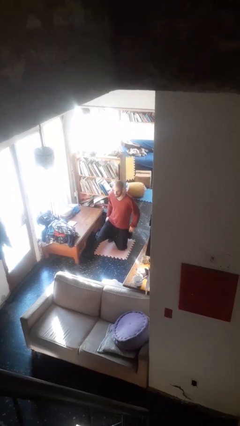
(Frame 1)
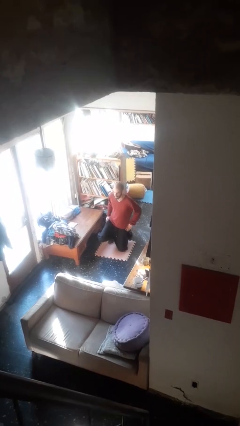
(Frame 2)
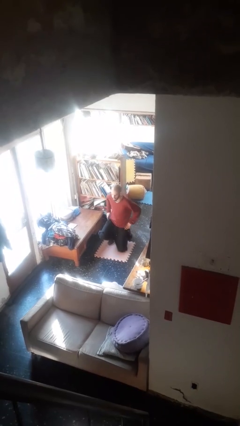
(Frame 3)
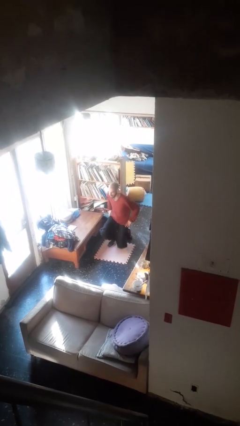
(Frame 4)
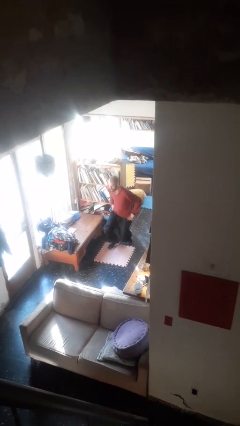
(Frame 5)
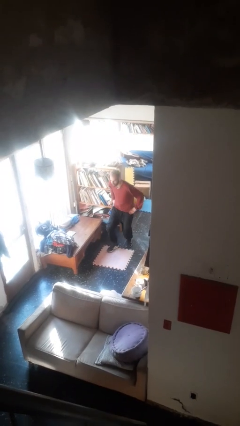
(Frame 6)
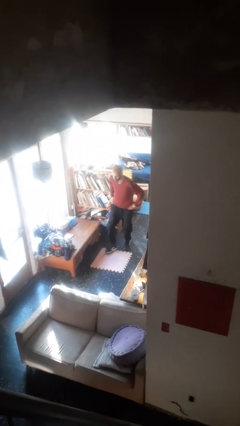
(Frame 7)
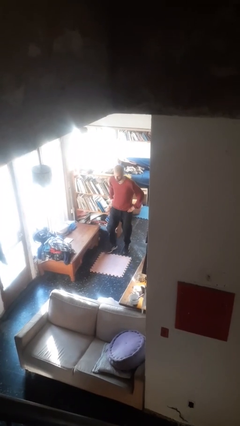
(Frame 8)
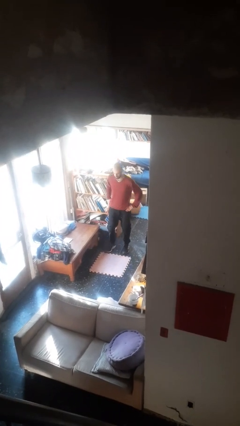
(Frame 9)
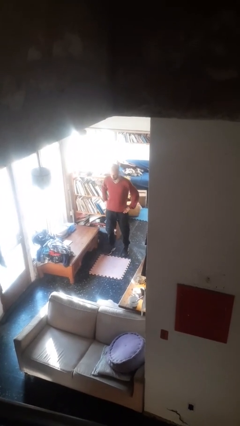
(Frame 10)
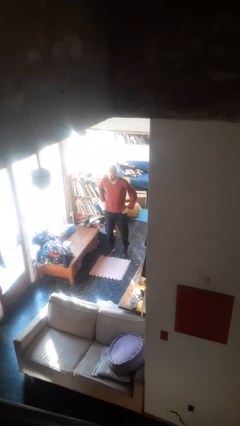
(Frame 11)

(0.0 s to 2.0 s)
person stands up from floor

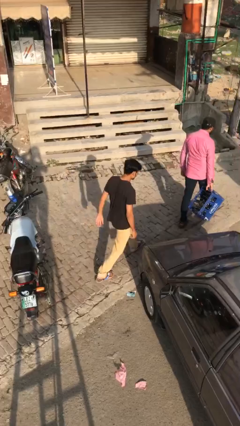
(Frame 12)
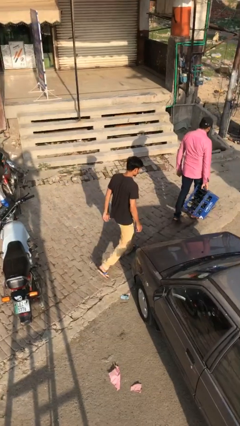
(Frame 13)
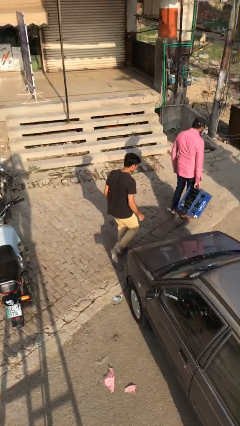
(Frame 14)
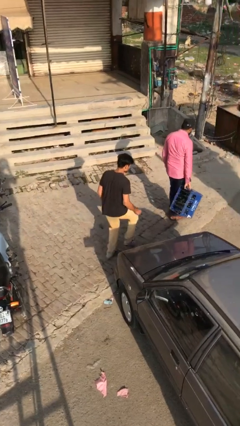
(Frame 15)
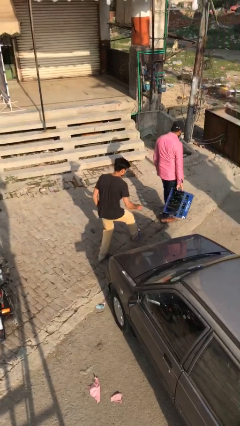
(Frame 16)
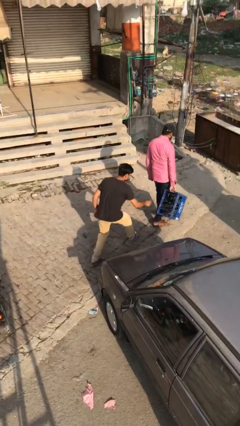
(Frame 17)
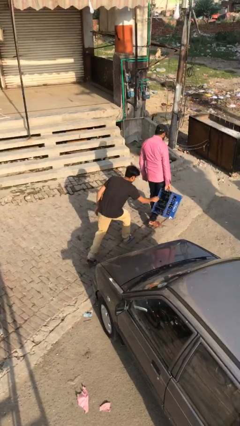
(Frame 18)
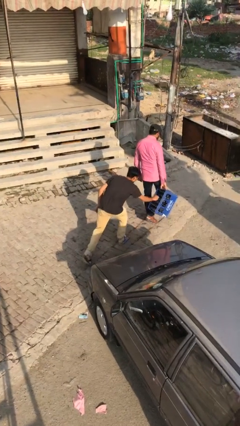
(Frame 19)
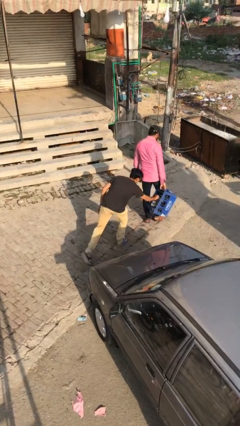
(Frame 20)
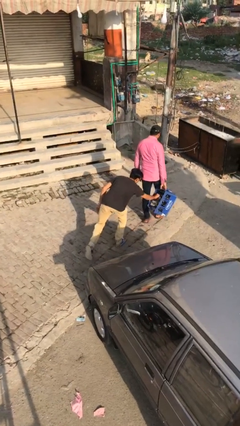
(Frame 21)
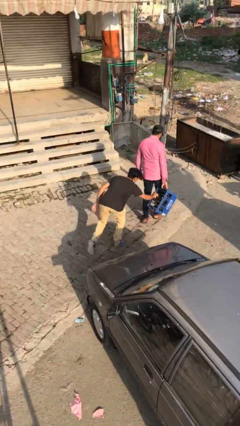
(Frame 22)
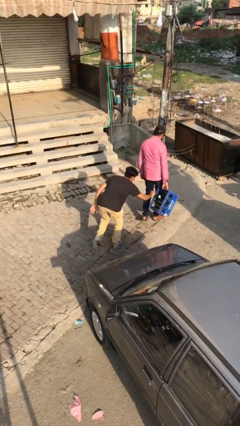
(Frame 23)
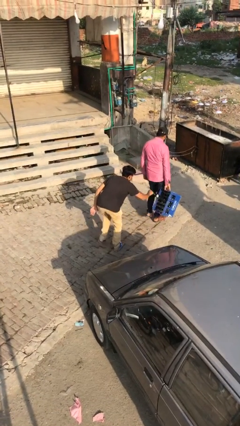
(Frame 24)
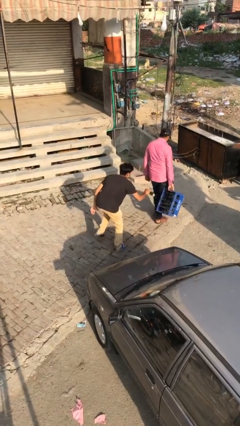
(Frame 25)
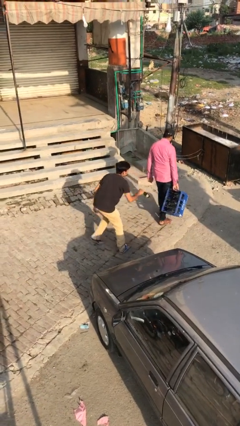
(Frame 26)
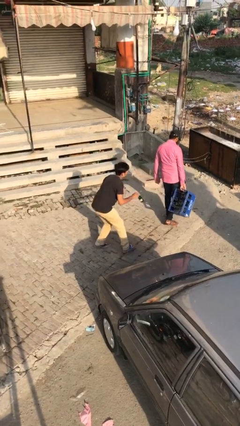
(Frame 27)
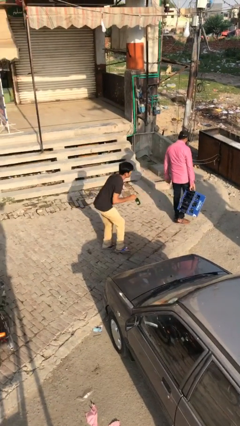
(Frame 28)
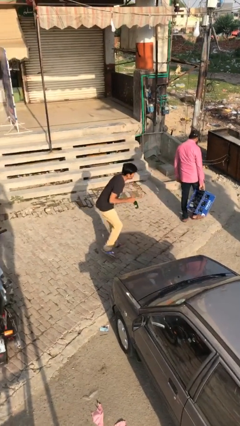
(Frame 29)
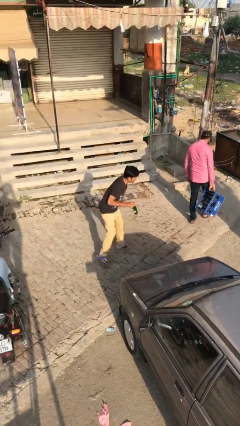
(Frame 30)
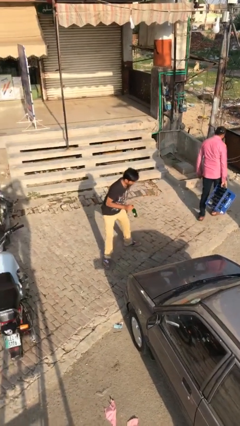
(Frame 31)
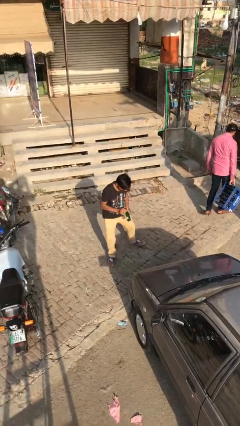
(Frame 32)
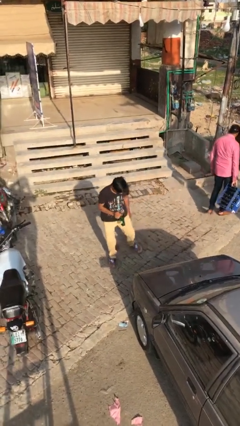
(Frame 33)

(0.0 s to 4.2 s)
person steals object from person

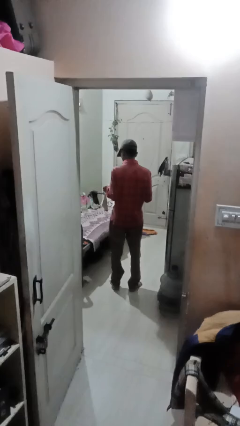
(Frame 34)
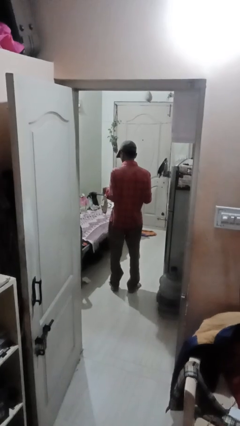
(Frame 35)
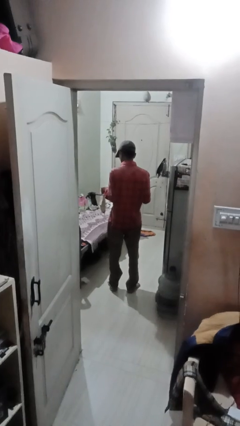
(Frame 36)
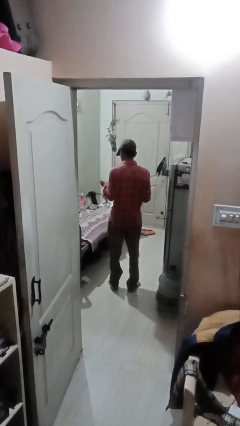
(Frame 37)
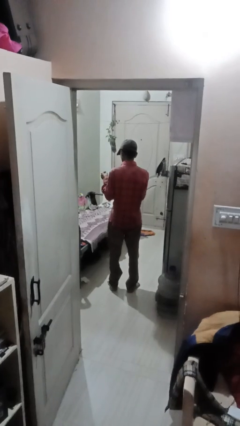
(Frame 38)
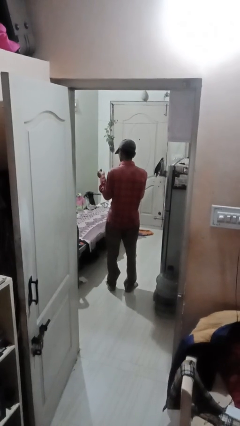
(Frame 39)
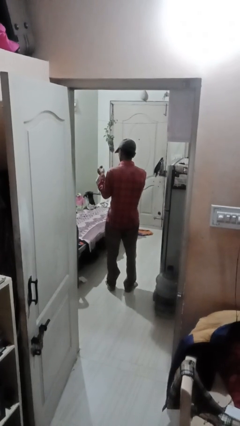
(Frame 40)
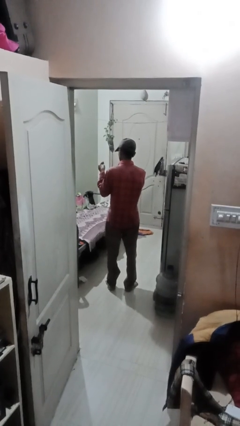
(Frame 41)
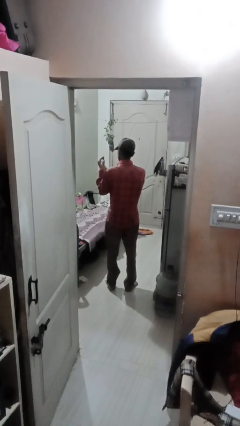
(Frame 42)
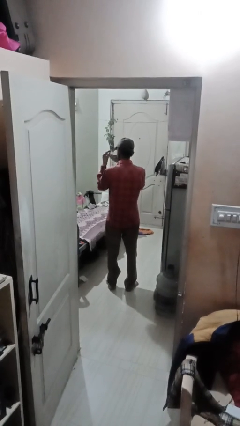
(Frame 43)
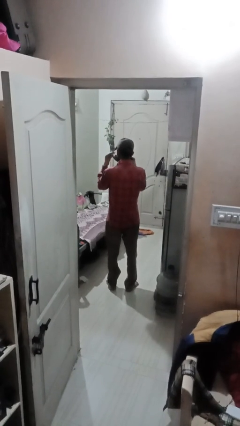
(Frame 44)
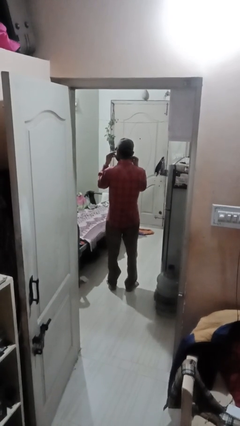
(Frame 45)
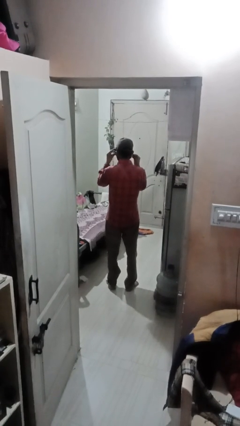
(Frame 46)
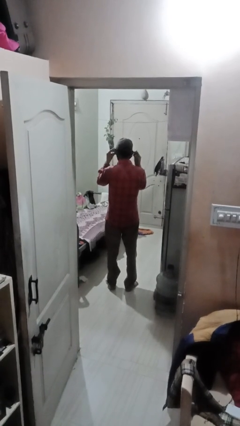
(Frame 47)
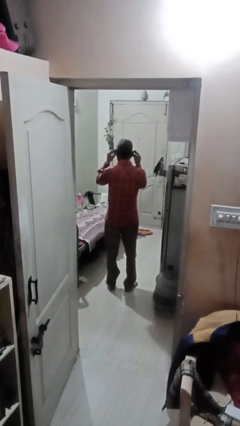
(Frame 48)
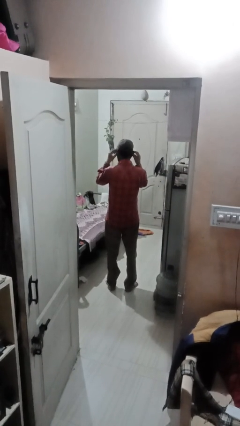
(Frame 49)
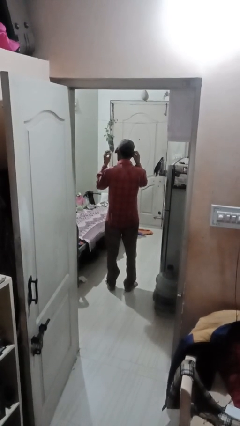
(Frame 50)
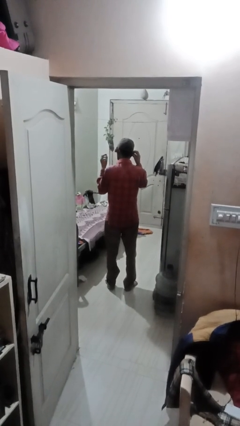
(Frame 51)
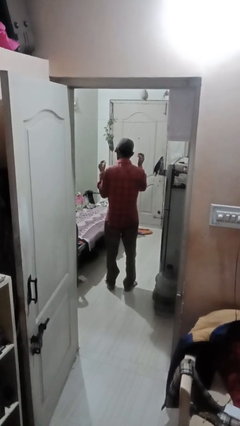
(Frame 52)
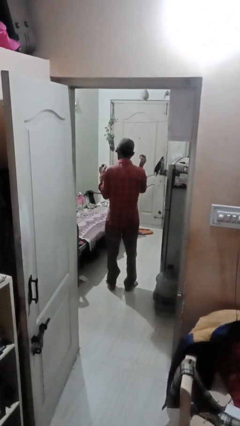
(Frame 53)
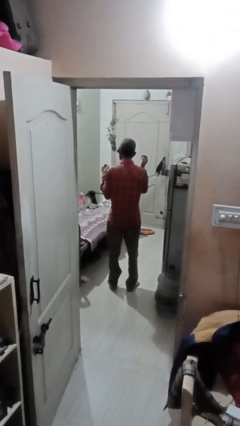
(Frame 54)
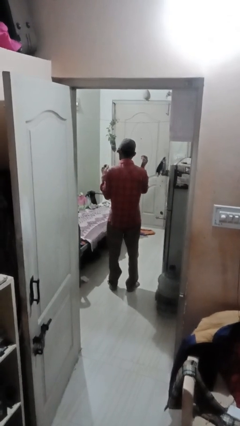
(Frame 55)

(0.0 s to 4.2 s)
person puts on facemask

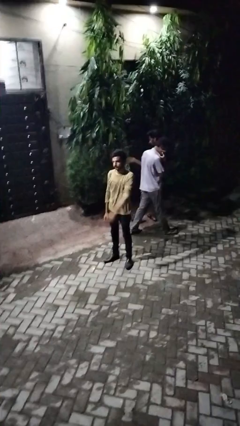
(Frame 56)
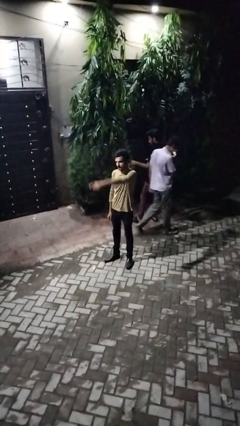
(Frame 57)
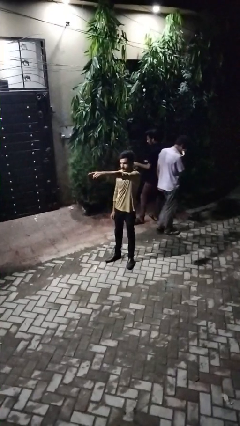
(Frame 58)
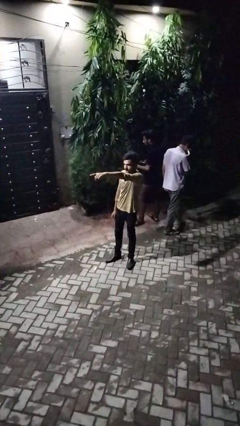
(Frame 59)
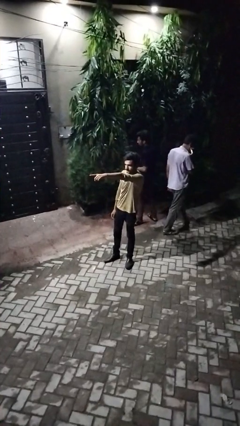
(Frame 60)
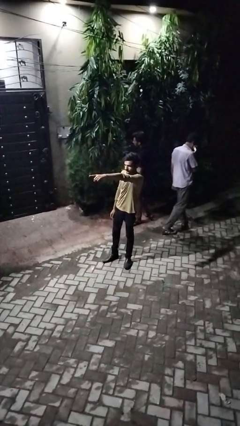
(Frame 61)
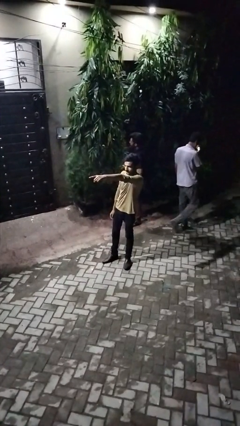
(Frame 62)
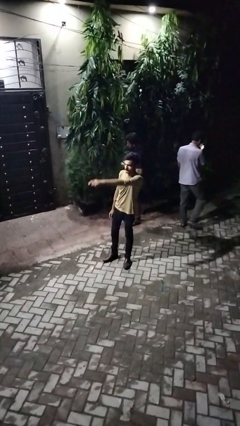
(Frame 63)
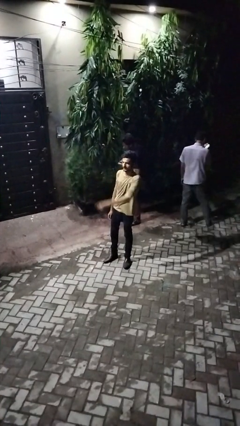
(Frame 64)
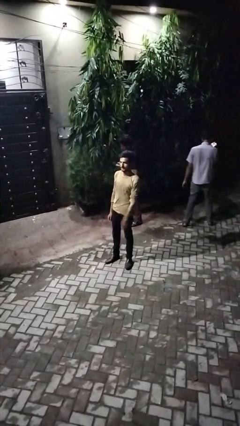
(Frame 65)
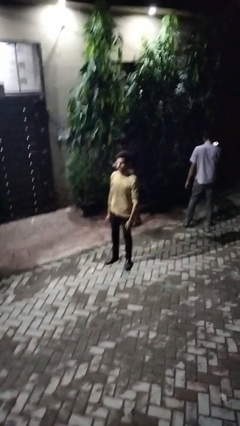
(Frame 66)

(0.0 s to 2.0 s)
person points at person

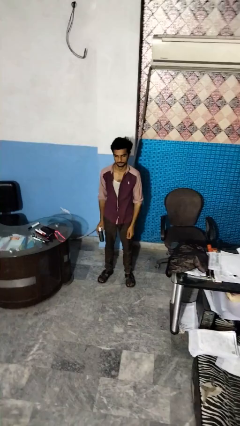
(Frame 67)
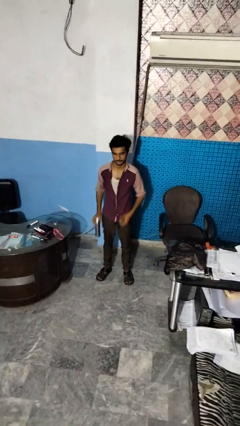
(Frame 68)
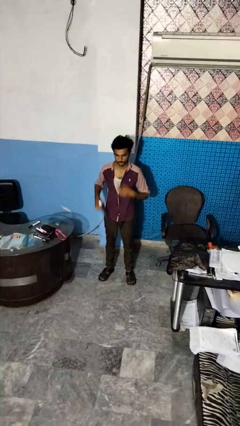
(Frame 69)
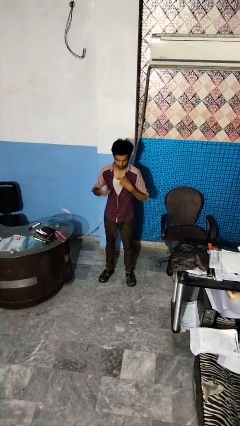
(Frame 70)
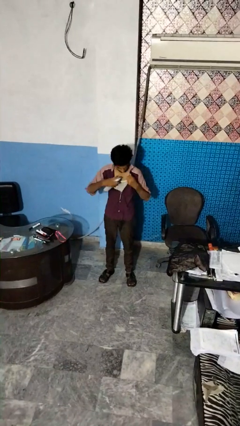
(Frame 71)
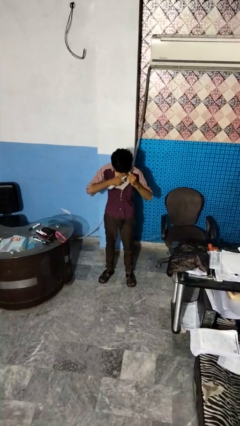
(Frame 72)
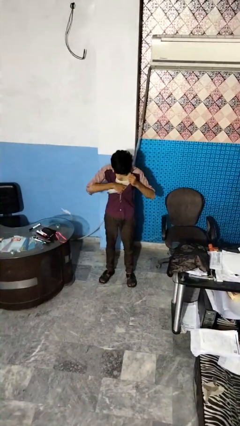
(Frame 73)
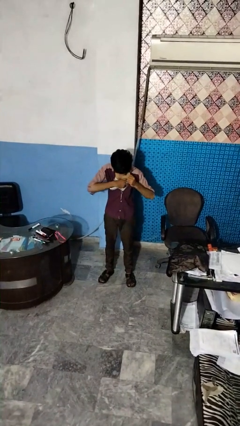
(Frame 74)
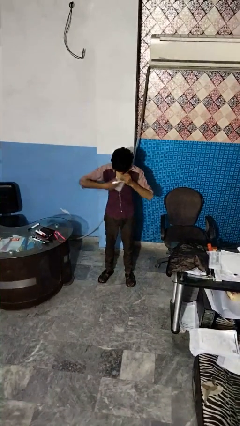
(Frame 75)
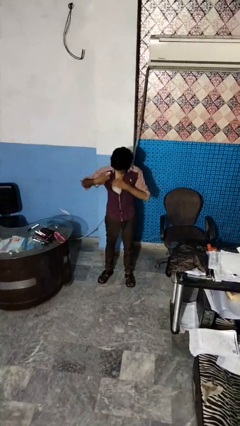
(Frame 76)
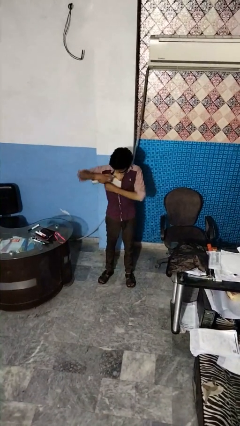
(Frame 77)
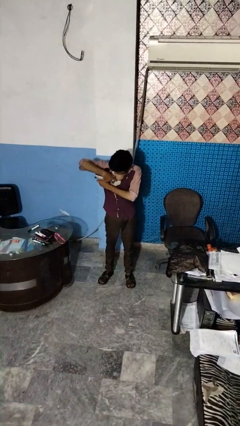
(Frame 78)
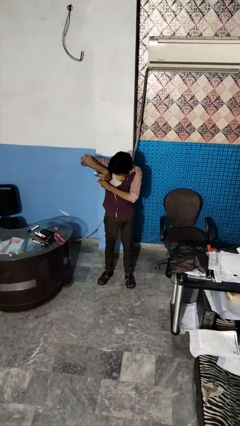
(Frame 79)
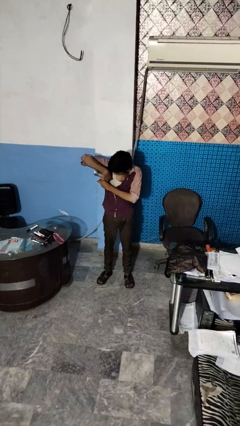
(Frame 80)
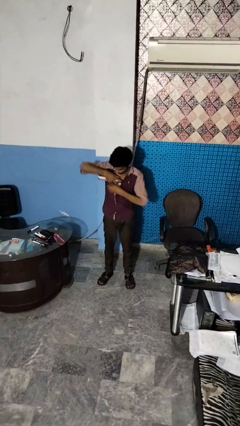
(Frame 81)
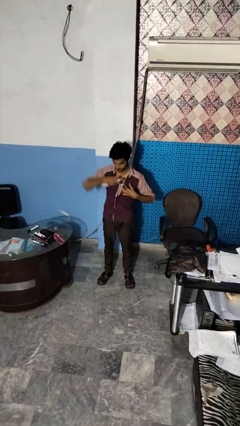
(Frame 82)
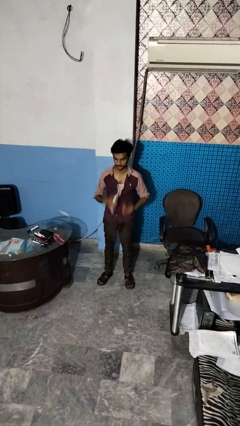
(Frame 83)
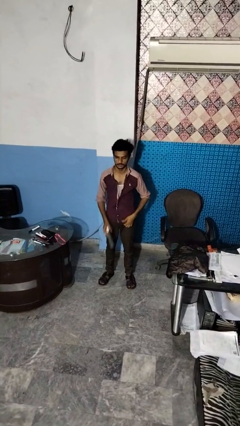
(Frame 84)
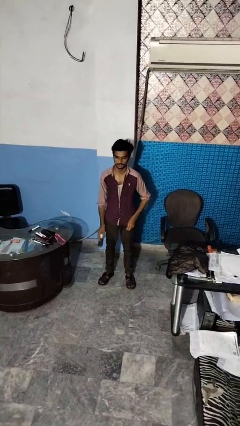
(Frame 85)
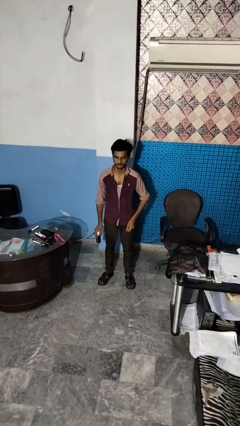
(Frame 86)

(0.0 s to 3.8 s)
person applies deodorant

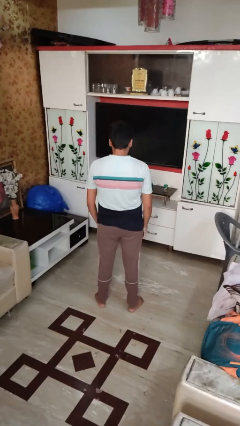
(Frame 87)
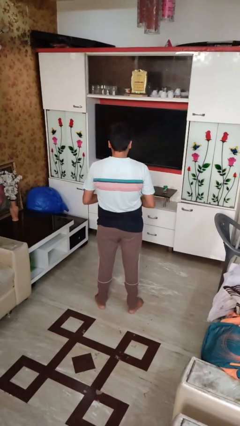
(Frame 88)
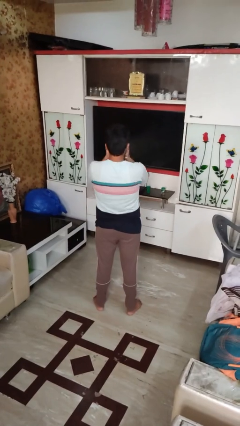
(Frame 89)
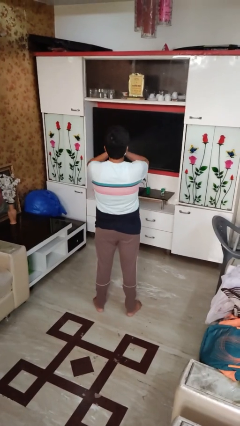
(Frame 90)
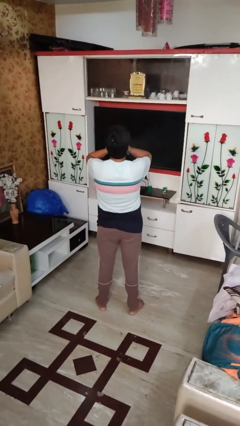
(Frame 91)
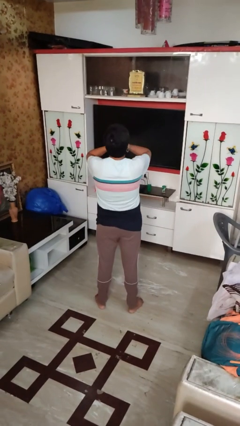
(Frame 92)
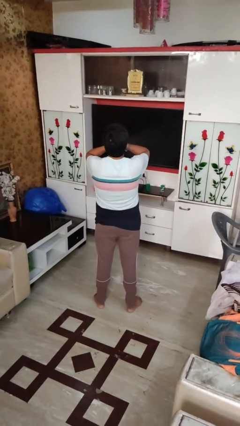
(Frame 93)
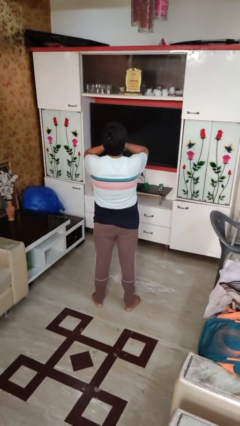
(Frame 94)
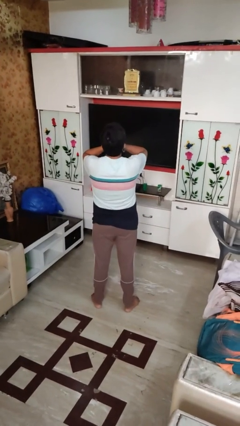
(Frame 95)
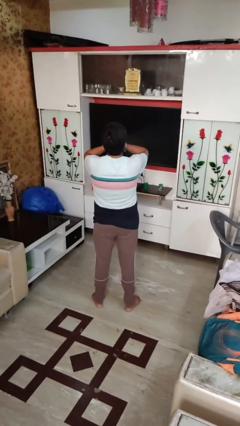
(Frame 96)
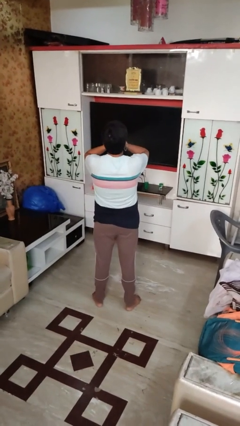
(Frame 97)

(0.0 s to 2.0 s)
person covers face with hands
